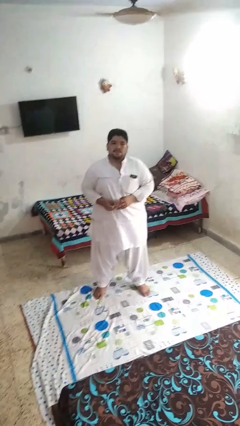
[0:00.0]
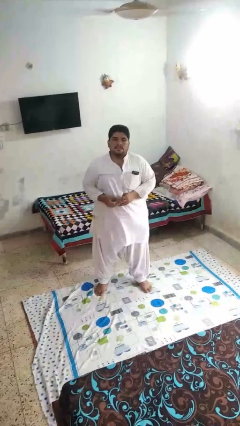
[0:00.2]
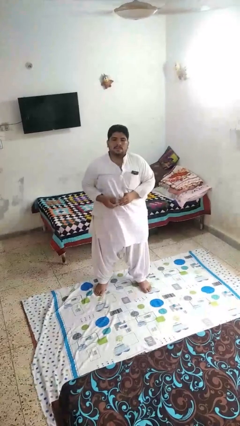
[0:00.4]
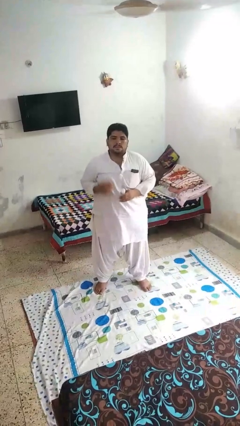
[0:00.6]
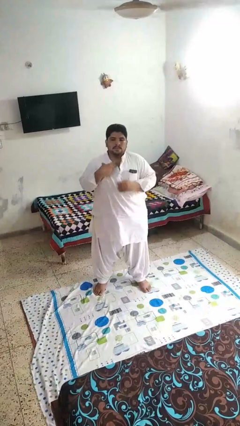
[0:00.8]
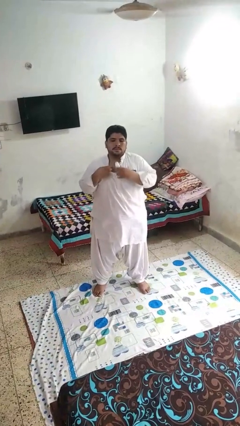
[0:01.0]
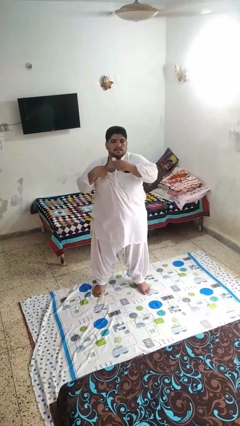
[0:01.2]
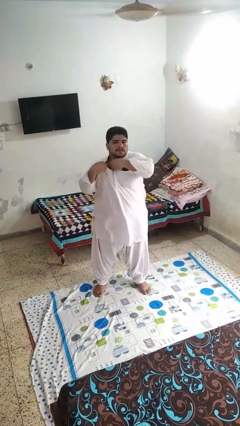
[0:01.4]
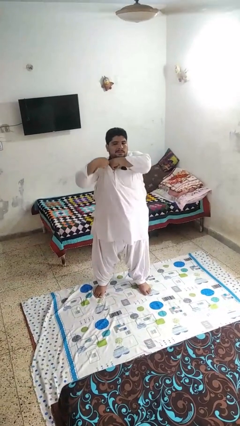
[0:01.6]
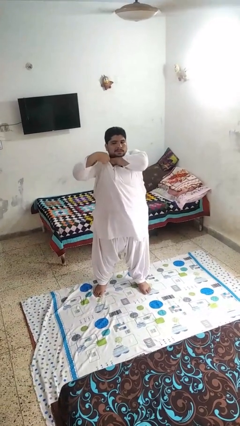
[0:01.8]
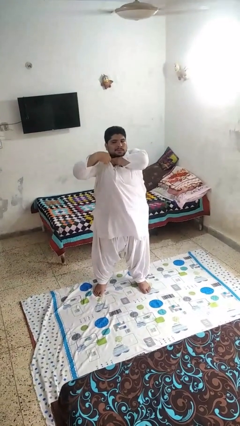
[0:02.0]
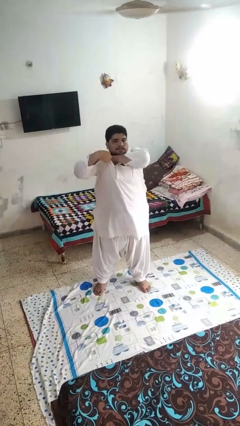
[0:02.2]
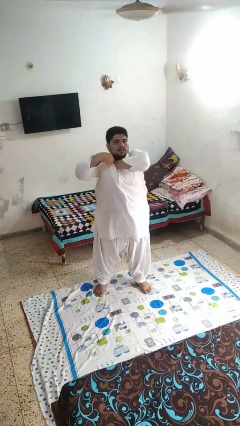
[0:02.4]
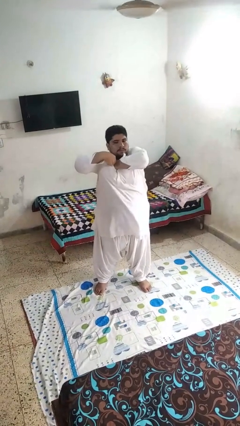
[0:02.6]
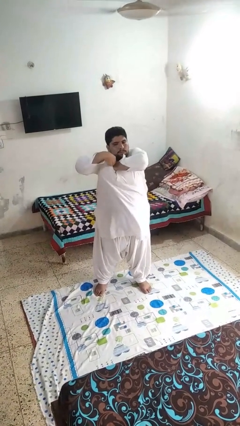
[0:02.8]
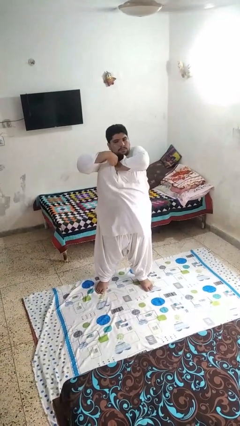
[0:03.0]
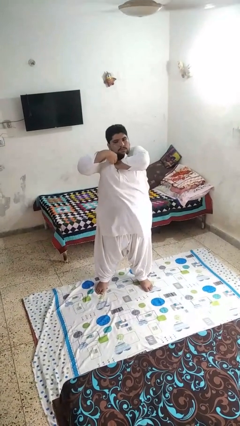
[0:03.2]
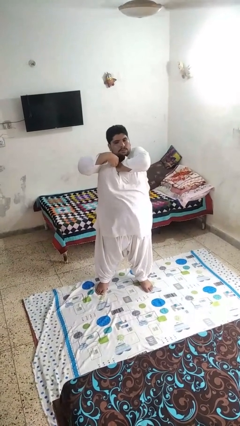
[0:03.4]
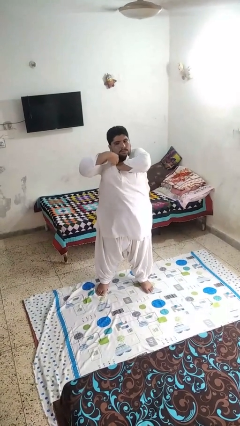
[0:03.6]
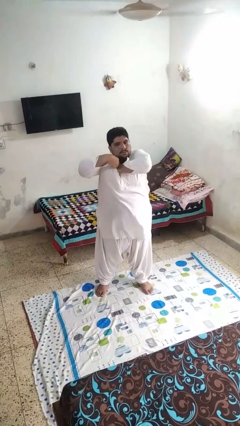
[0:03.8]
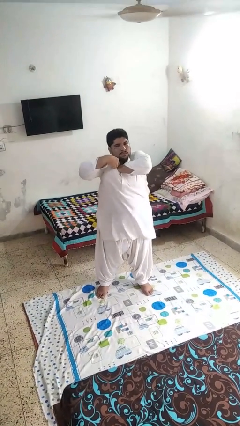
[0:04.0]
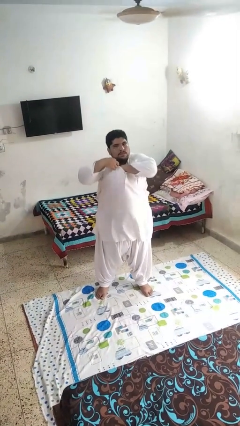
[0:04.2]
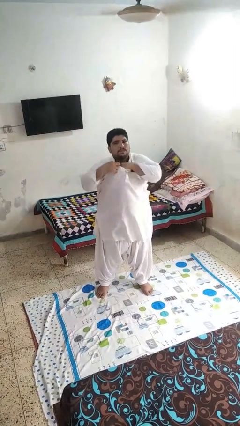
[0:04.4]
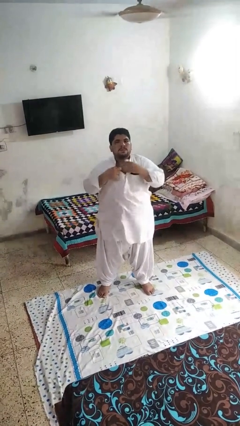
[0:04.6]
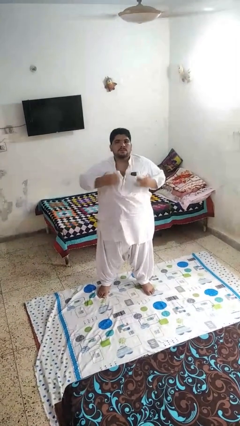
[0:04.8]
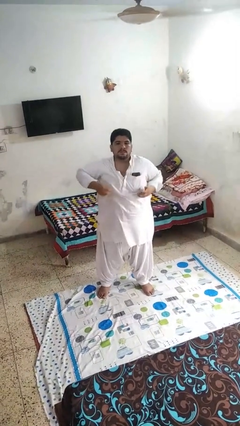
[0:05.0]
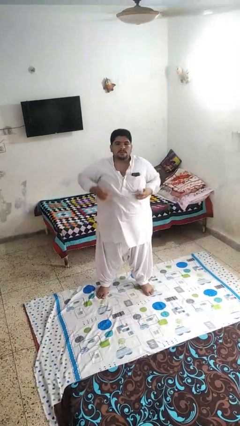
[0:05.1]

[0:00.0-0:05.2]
person applies deodorant

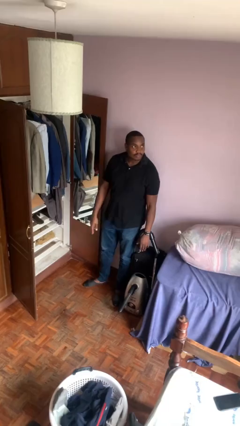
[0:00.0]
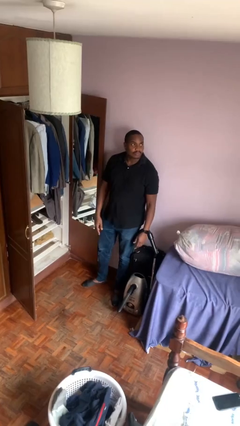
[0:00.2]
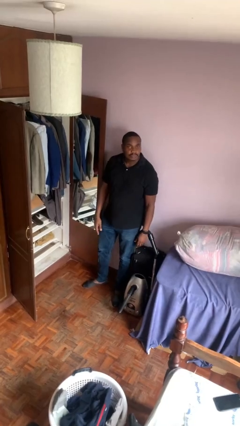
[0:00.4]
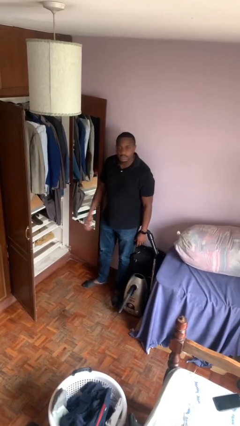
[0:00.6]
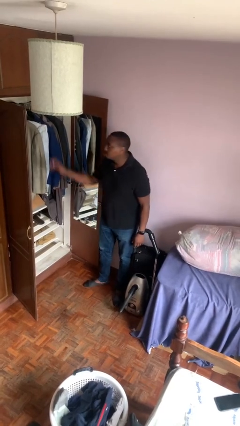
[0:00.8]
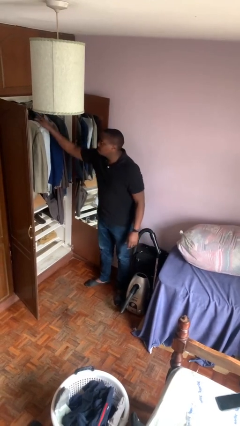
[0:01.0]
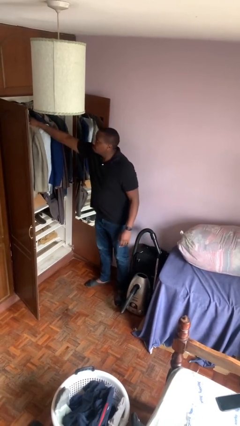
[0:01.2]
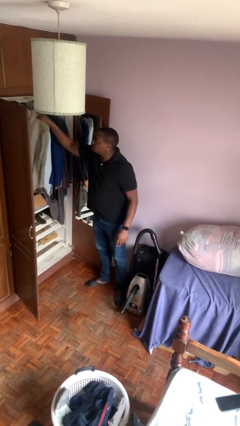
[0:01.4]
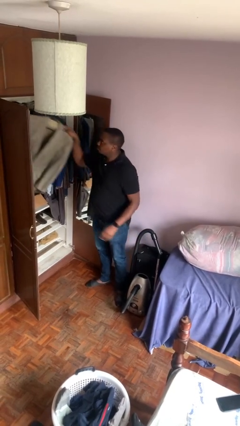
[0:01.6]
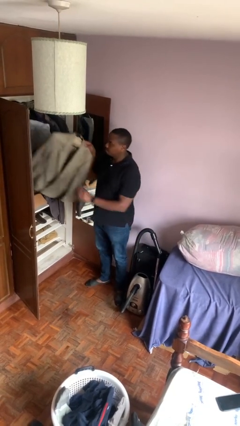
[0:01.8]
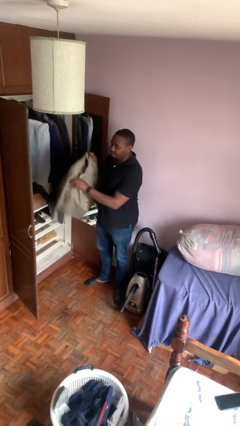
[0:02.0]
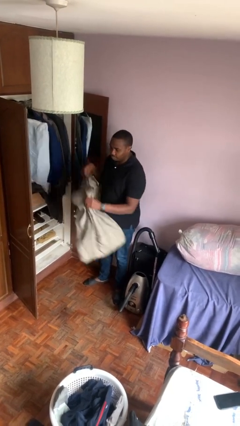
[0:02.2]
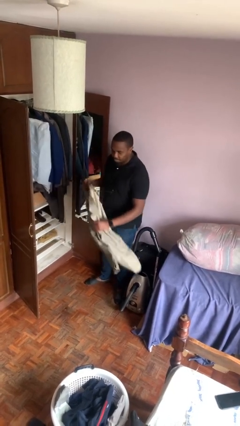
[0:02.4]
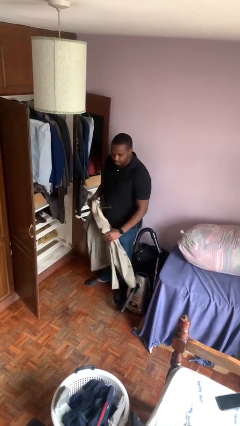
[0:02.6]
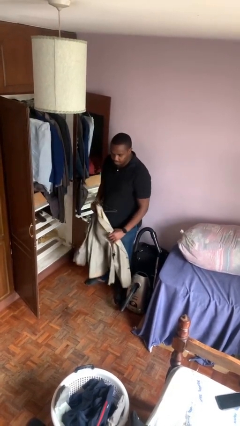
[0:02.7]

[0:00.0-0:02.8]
person takes clothes from closet

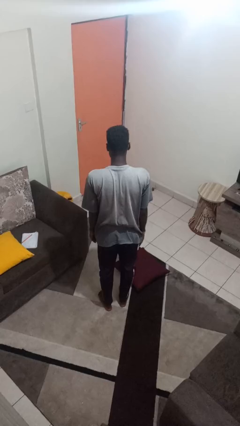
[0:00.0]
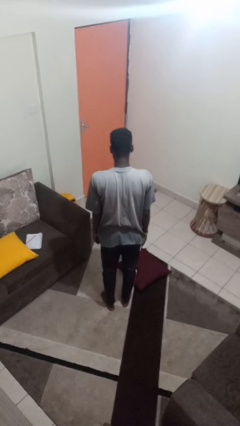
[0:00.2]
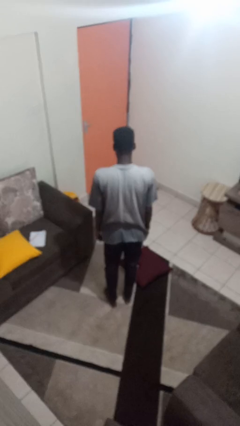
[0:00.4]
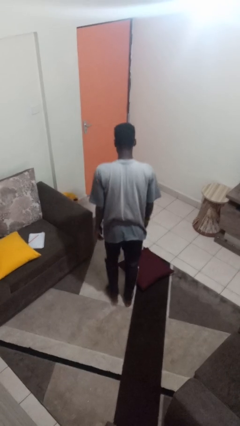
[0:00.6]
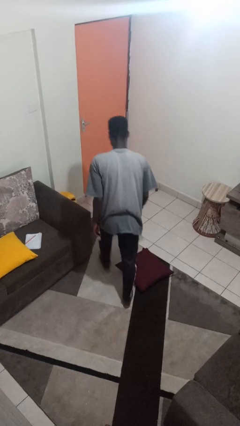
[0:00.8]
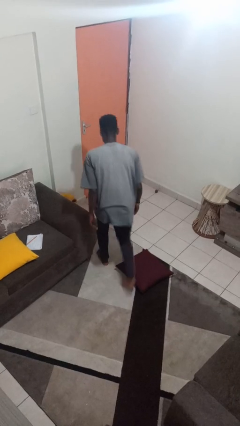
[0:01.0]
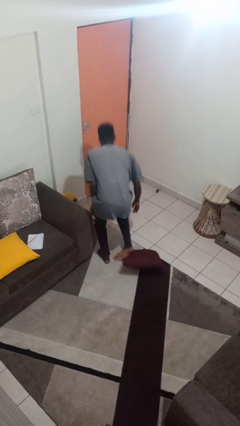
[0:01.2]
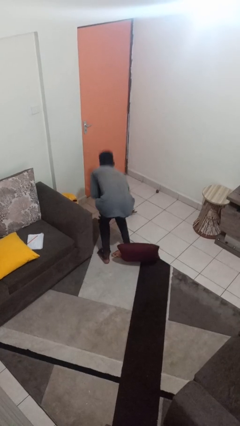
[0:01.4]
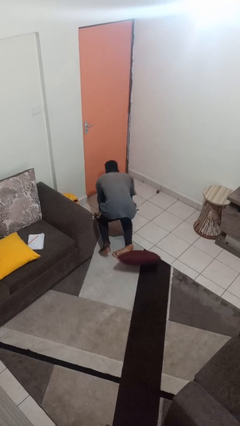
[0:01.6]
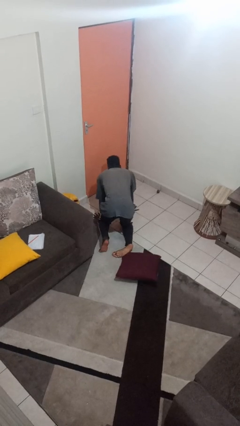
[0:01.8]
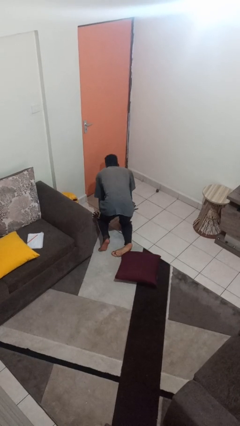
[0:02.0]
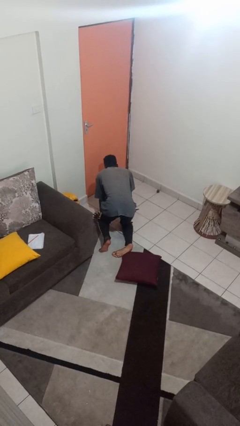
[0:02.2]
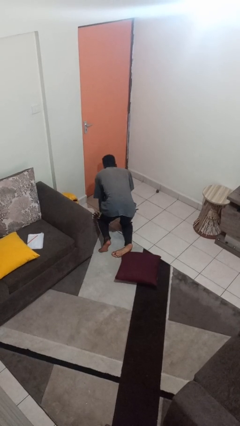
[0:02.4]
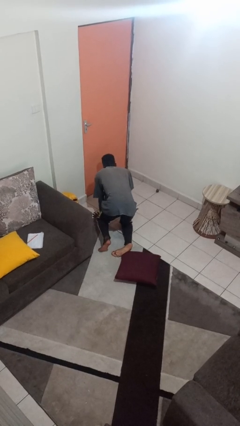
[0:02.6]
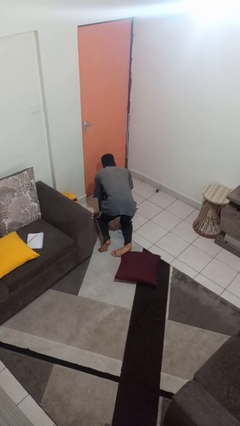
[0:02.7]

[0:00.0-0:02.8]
person trips on object on floor

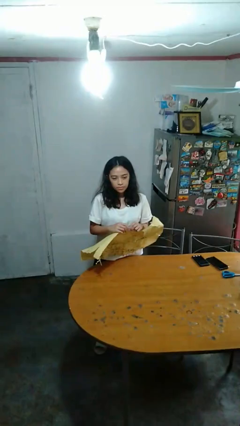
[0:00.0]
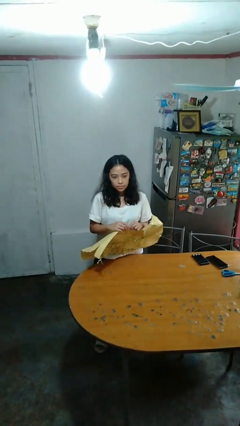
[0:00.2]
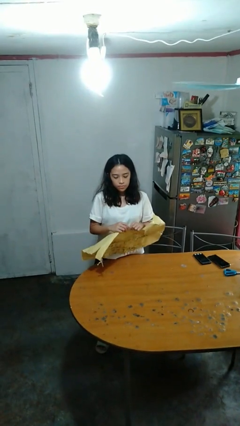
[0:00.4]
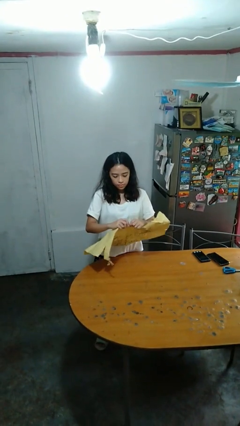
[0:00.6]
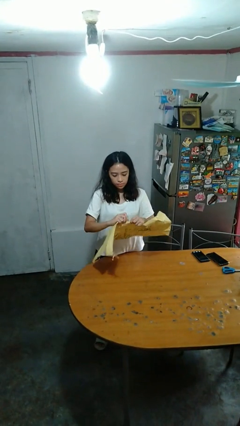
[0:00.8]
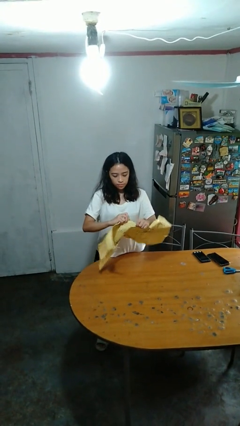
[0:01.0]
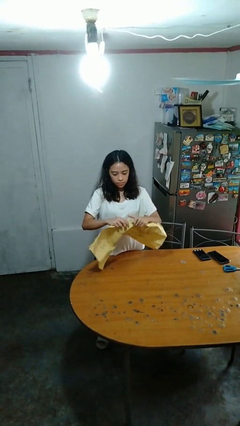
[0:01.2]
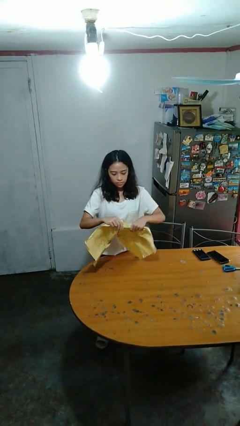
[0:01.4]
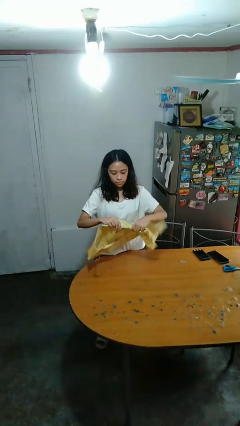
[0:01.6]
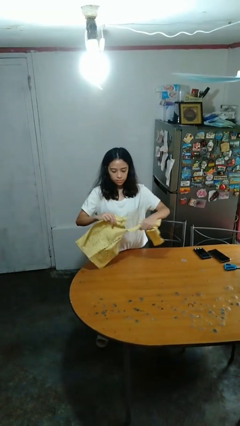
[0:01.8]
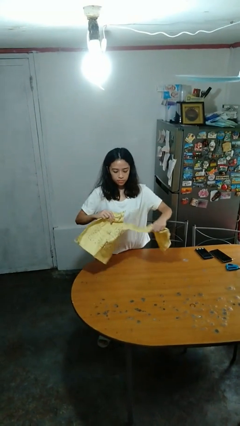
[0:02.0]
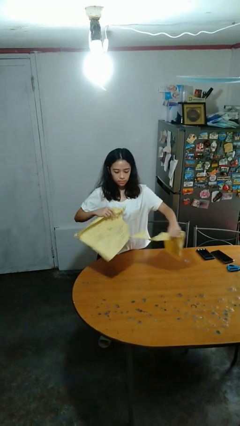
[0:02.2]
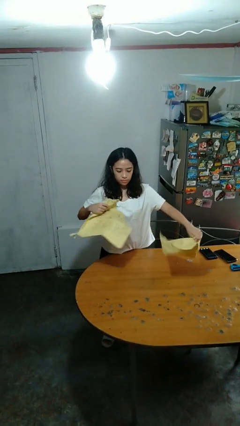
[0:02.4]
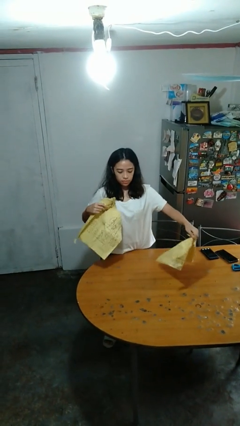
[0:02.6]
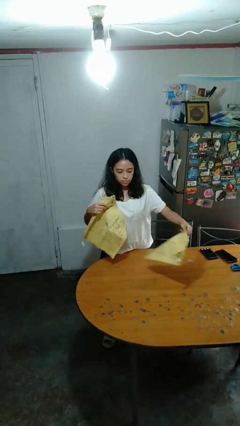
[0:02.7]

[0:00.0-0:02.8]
person tears paper

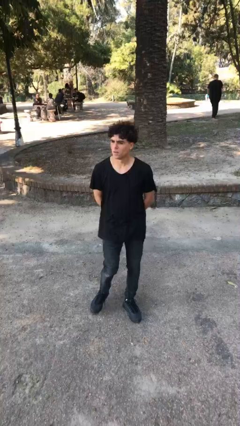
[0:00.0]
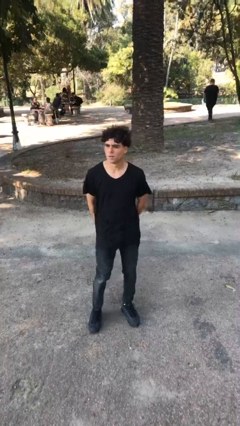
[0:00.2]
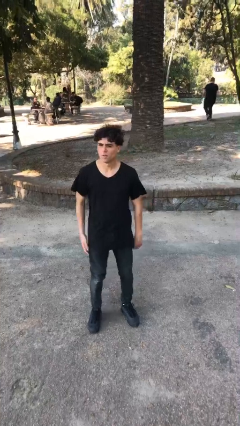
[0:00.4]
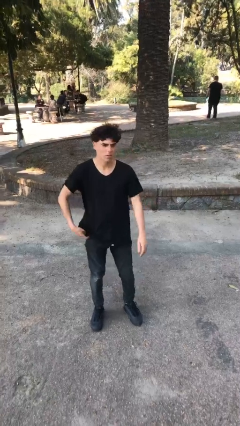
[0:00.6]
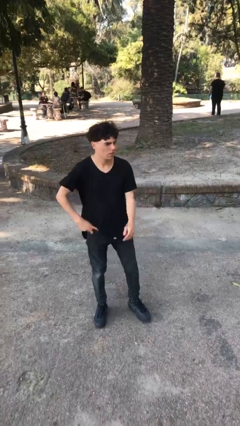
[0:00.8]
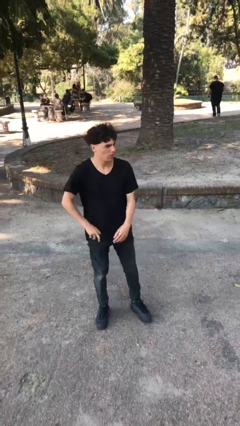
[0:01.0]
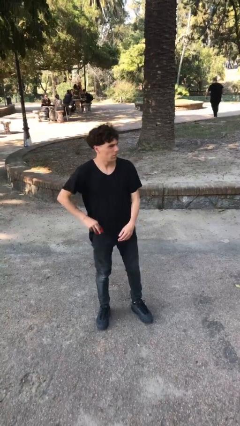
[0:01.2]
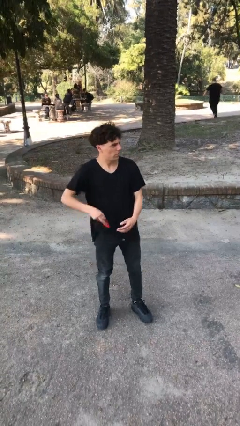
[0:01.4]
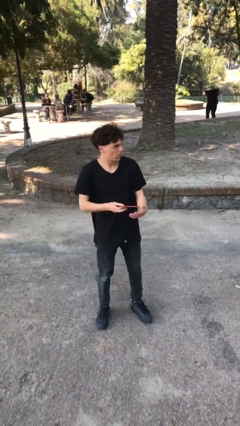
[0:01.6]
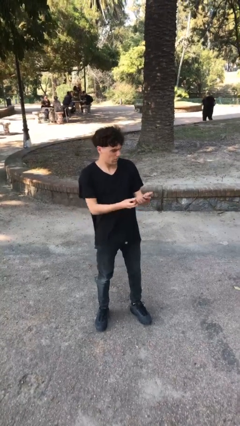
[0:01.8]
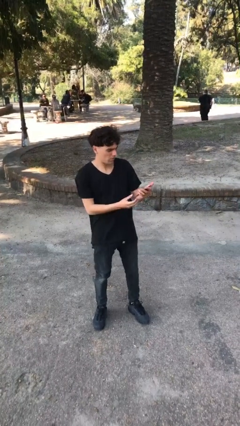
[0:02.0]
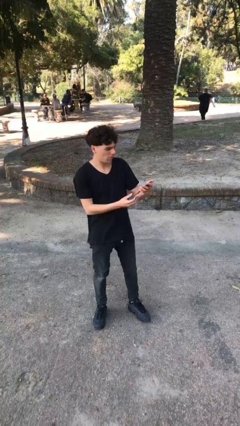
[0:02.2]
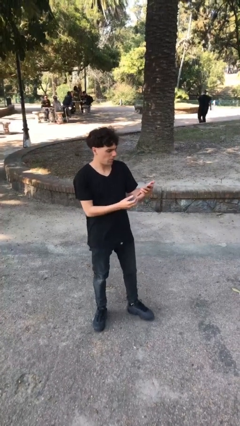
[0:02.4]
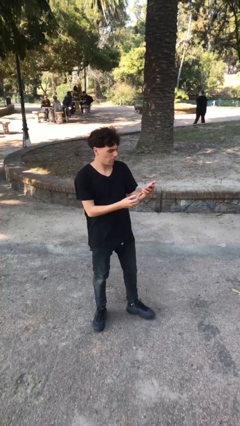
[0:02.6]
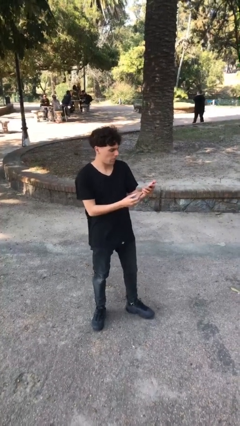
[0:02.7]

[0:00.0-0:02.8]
person takes phone from pocket

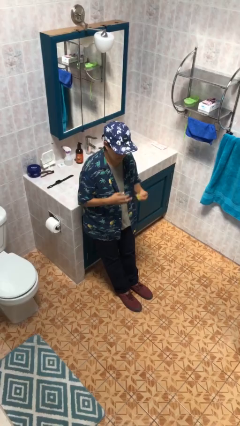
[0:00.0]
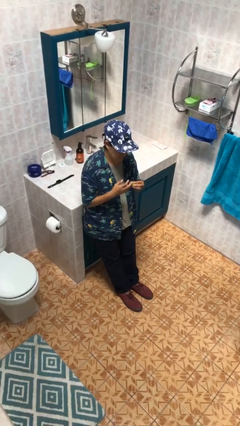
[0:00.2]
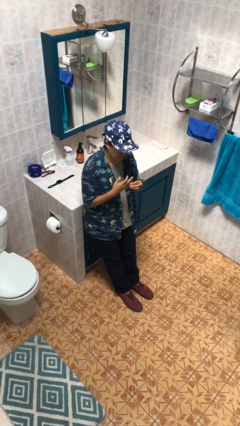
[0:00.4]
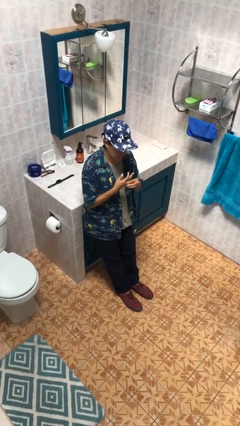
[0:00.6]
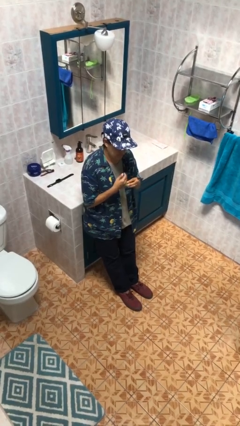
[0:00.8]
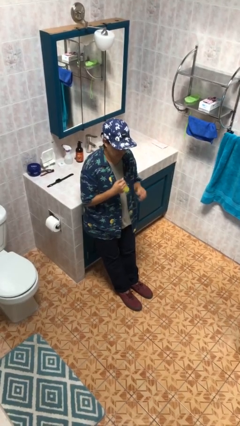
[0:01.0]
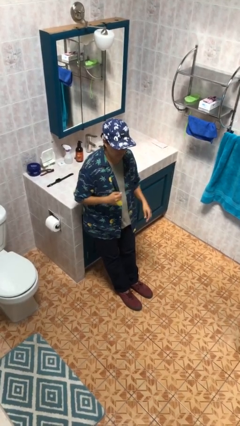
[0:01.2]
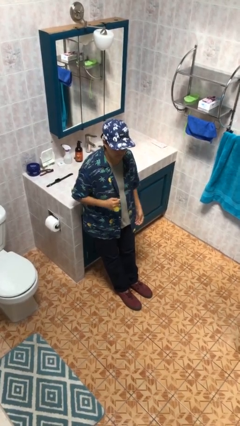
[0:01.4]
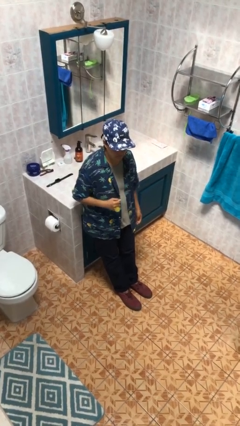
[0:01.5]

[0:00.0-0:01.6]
person puts on ring
